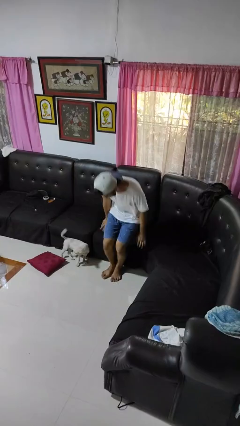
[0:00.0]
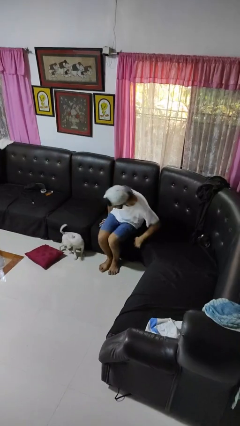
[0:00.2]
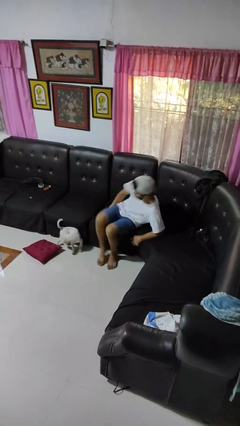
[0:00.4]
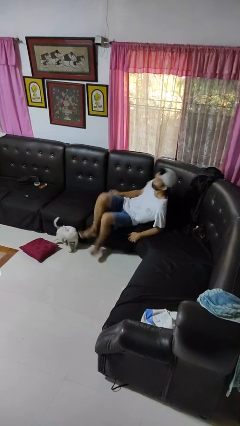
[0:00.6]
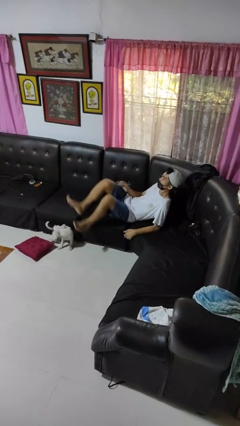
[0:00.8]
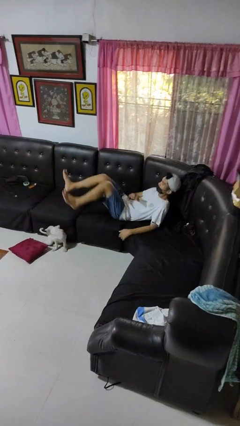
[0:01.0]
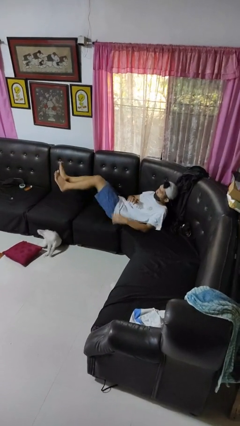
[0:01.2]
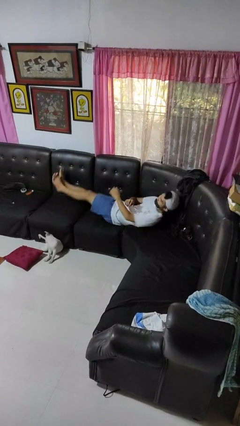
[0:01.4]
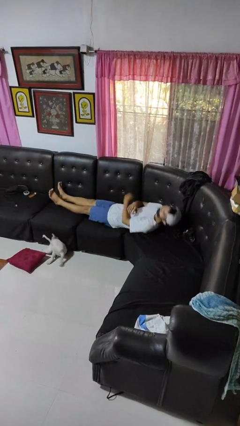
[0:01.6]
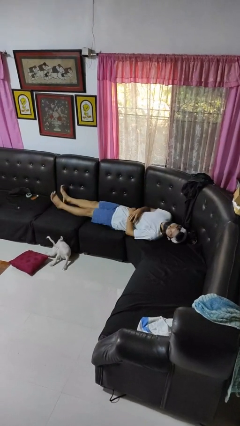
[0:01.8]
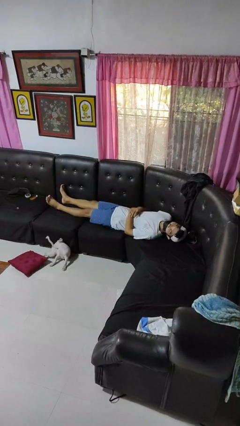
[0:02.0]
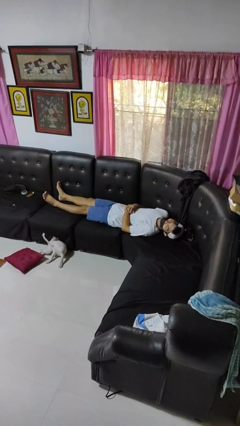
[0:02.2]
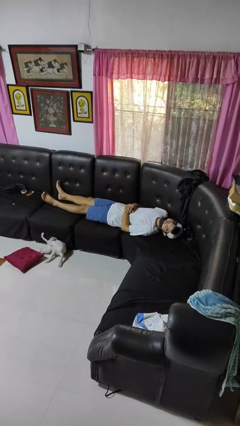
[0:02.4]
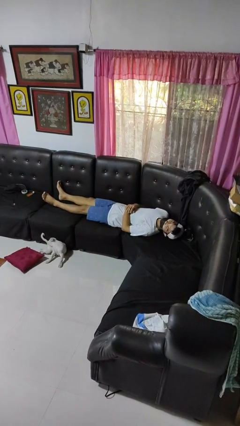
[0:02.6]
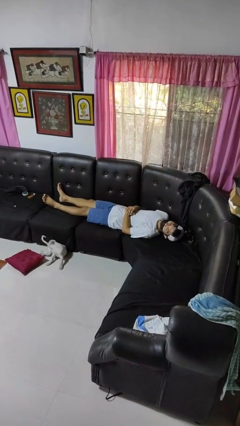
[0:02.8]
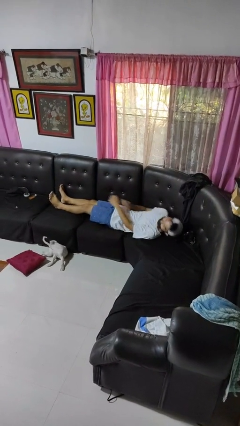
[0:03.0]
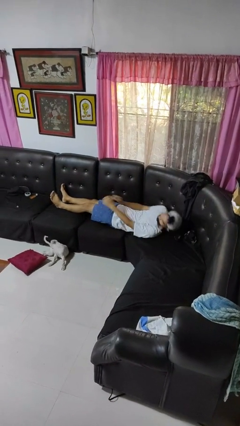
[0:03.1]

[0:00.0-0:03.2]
person lies down on couch

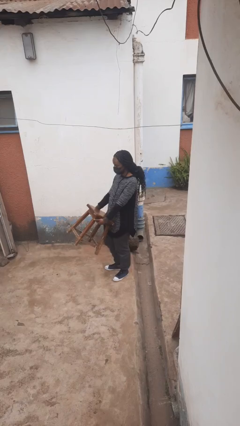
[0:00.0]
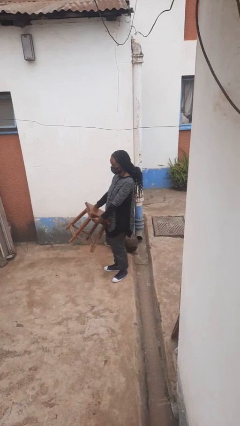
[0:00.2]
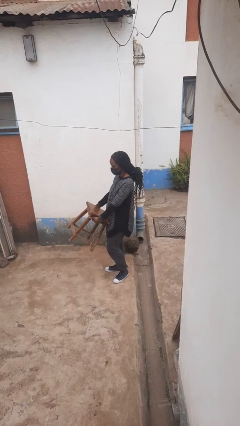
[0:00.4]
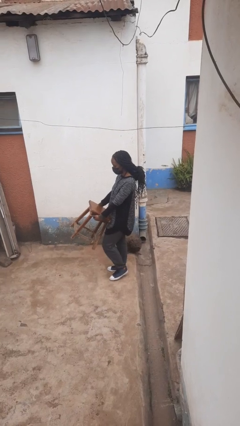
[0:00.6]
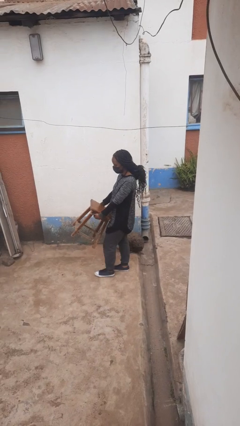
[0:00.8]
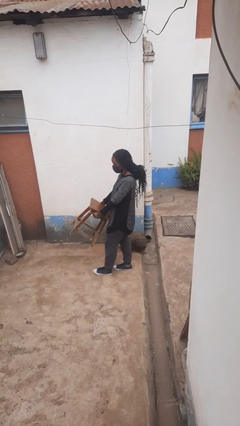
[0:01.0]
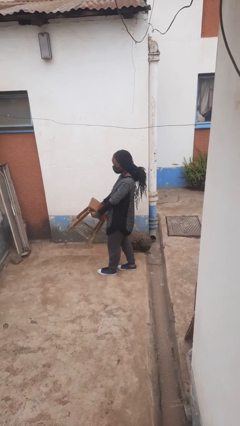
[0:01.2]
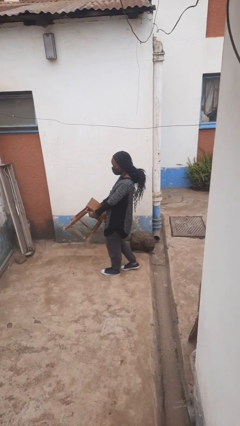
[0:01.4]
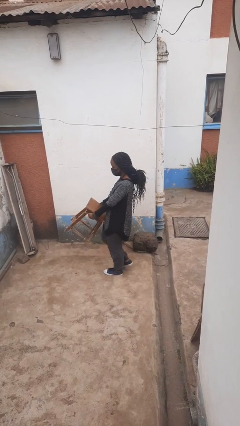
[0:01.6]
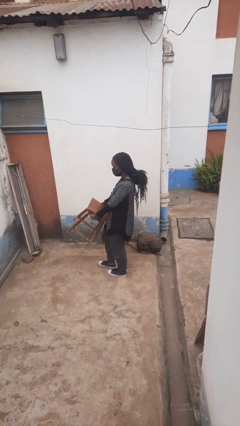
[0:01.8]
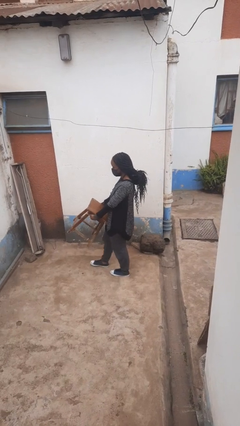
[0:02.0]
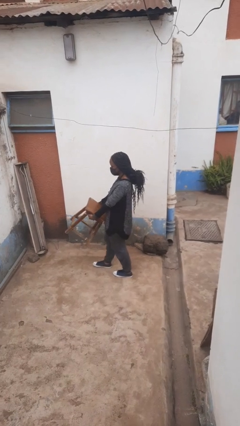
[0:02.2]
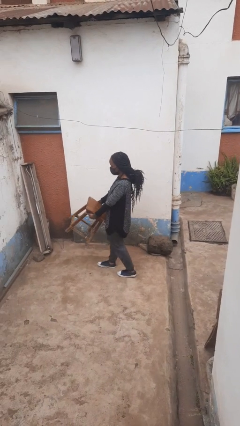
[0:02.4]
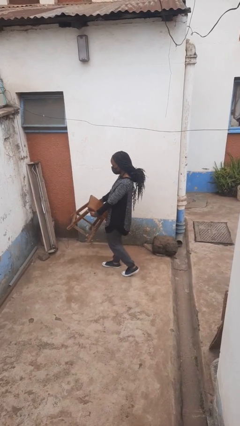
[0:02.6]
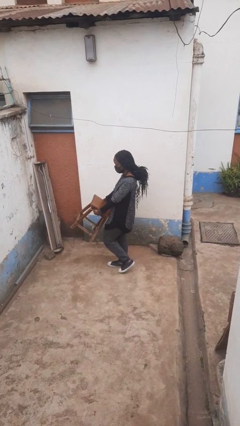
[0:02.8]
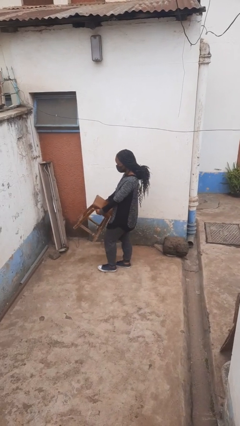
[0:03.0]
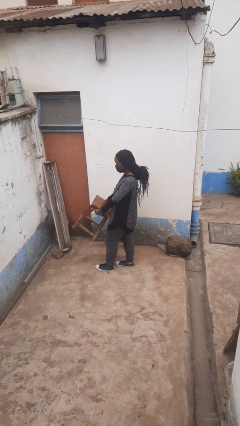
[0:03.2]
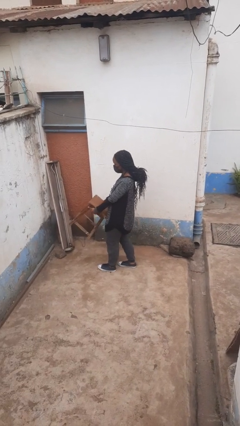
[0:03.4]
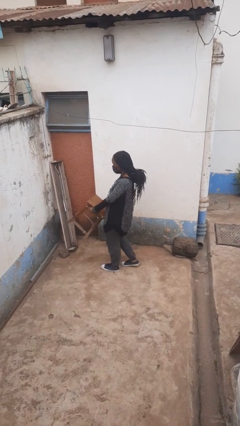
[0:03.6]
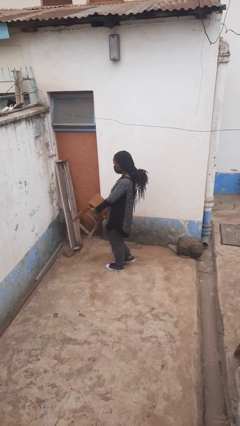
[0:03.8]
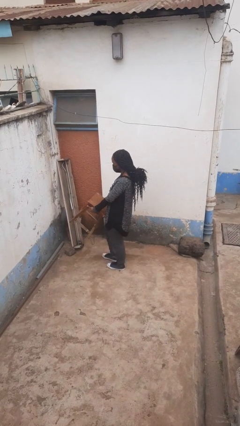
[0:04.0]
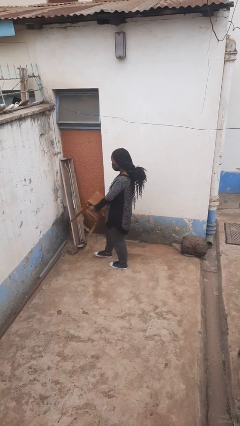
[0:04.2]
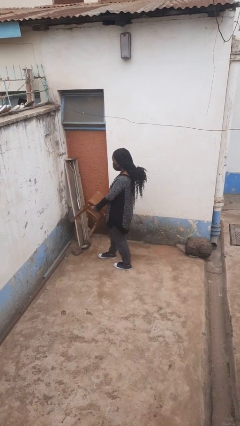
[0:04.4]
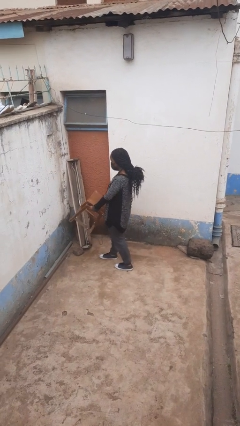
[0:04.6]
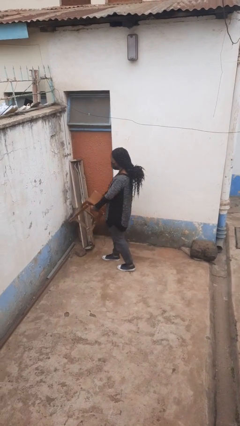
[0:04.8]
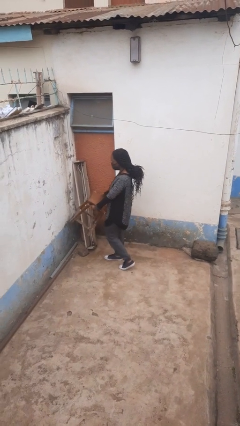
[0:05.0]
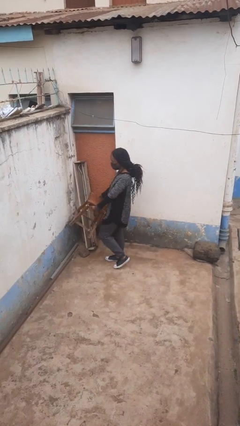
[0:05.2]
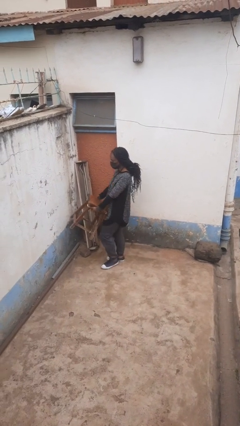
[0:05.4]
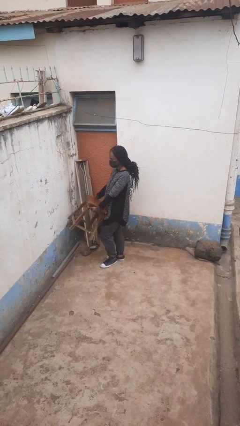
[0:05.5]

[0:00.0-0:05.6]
person carries furniture

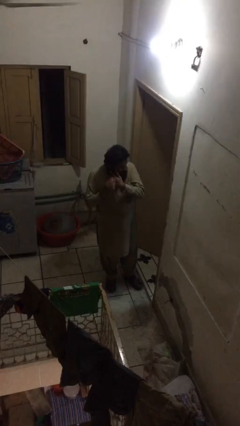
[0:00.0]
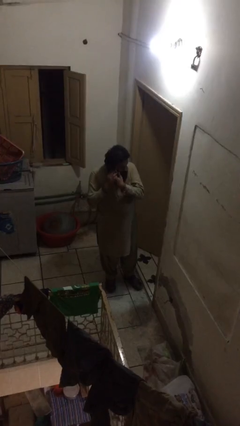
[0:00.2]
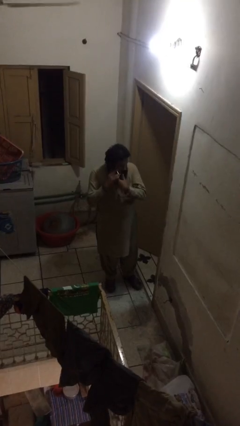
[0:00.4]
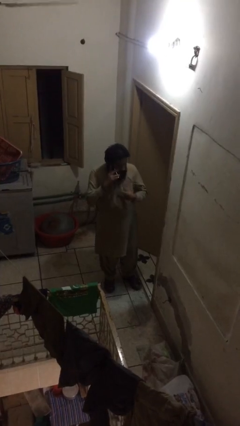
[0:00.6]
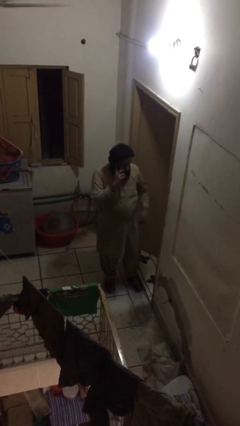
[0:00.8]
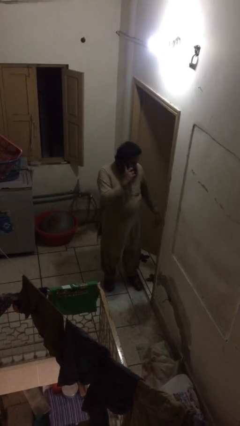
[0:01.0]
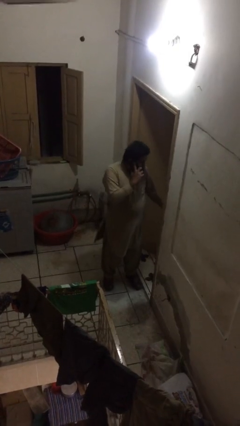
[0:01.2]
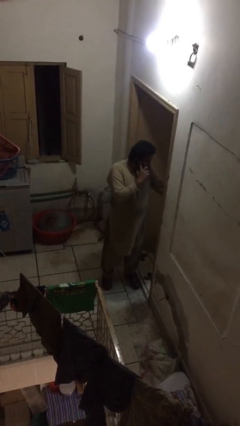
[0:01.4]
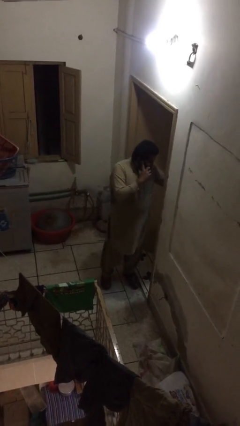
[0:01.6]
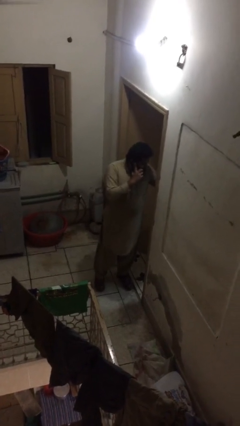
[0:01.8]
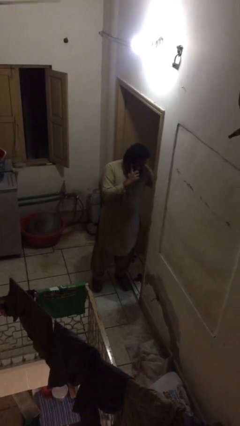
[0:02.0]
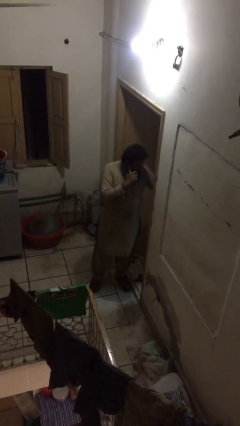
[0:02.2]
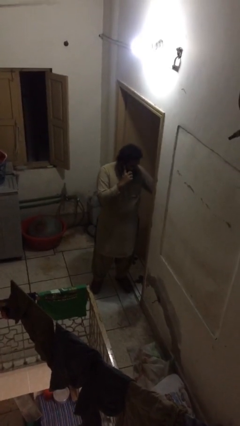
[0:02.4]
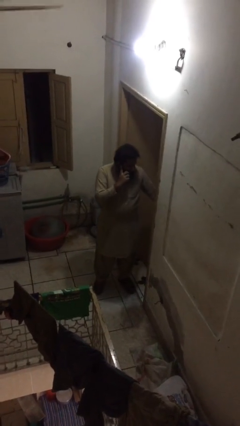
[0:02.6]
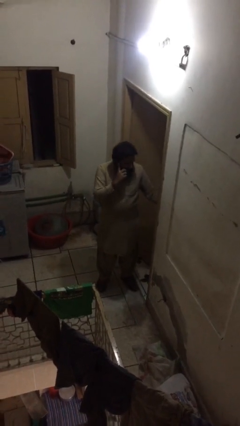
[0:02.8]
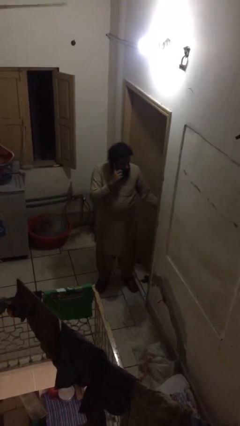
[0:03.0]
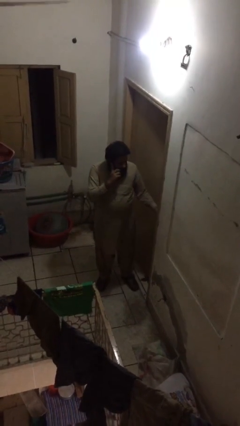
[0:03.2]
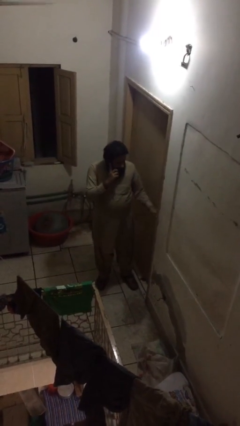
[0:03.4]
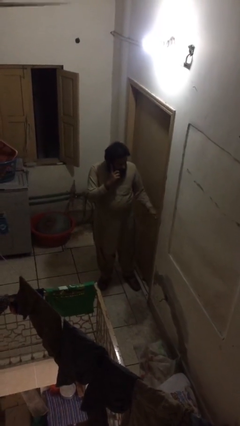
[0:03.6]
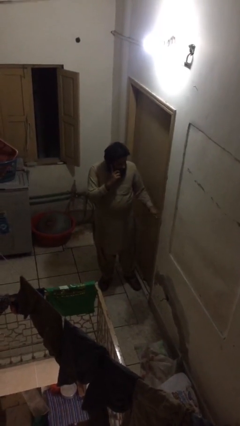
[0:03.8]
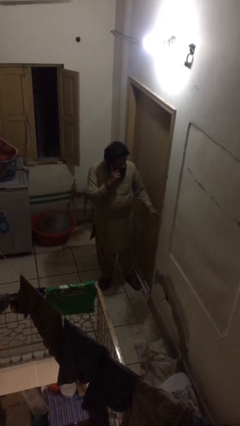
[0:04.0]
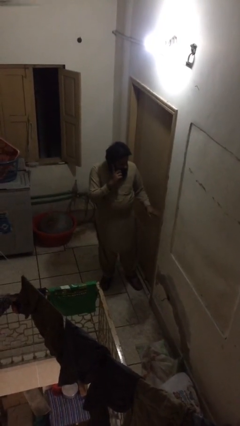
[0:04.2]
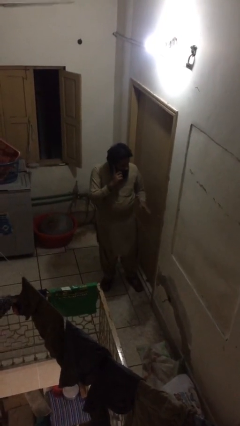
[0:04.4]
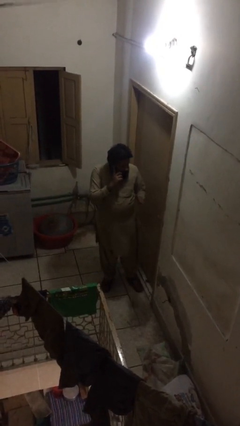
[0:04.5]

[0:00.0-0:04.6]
person closes facility door

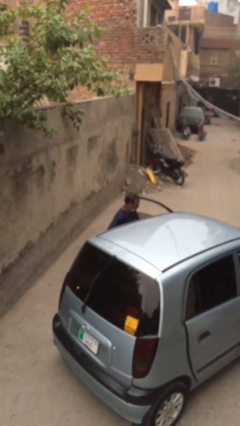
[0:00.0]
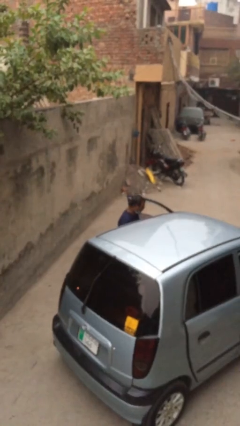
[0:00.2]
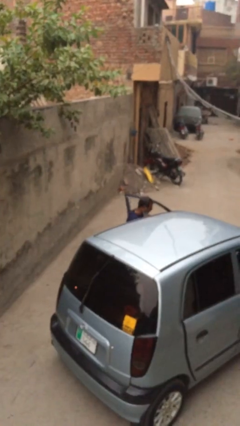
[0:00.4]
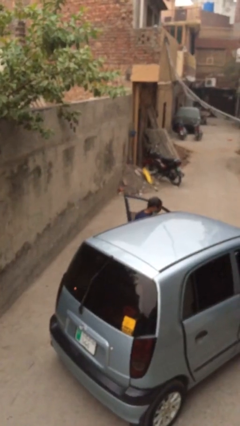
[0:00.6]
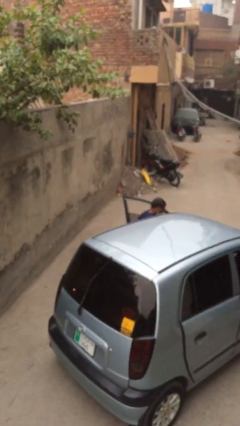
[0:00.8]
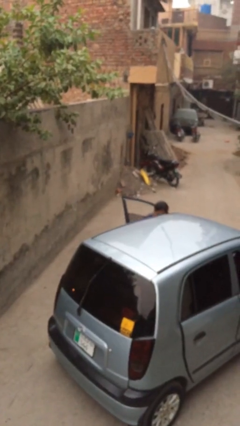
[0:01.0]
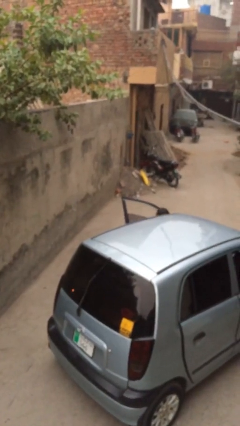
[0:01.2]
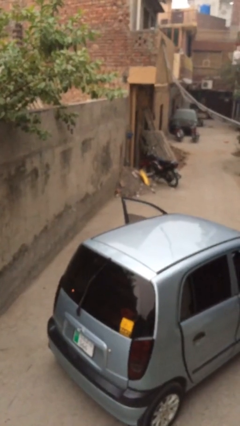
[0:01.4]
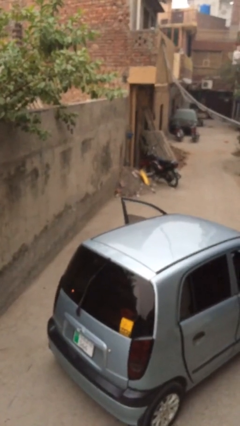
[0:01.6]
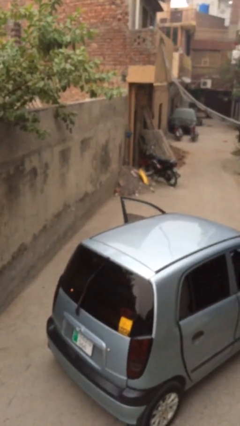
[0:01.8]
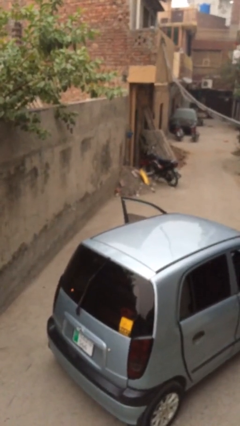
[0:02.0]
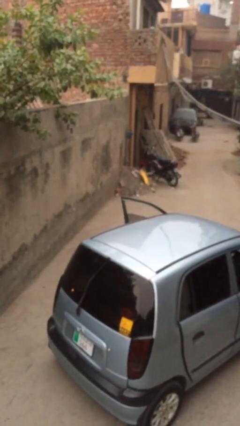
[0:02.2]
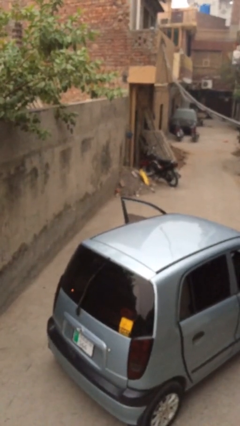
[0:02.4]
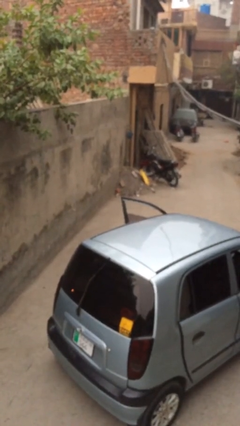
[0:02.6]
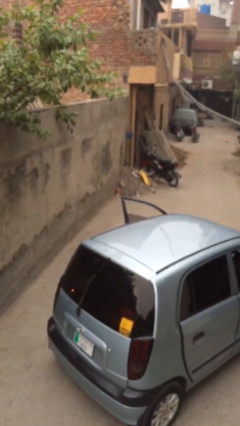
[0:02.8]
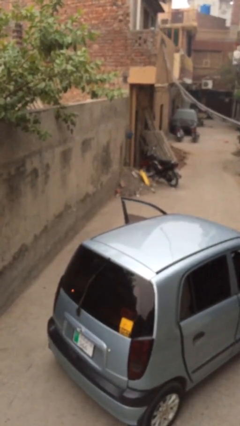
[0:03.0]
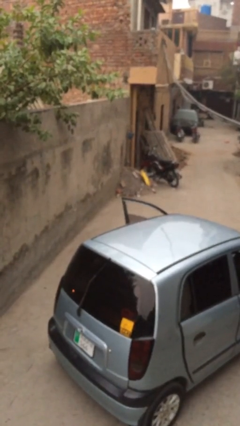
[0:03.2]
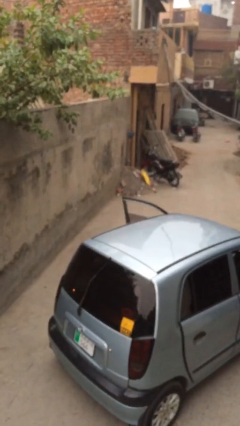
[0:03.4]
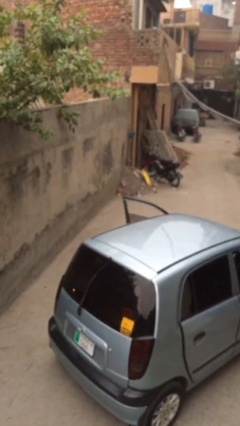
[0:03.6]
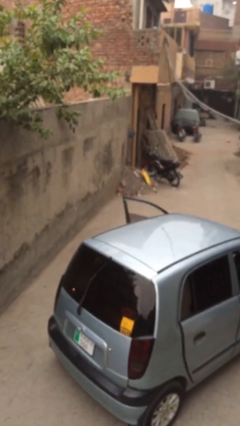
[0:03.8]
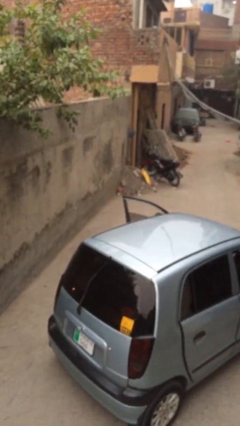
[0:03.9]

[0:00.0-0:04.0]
person enters car

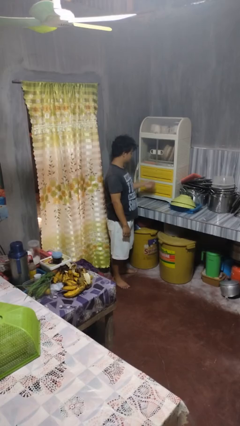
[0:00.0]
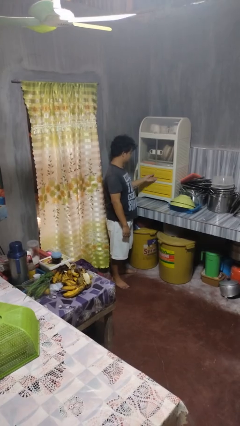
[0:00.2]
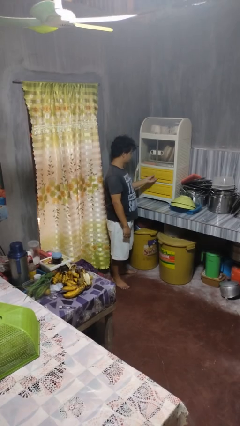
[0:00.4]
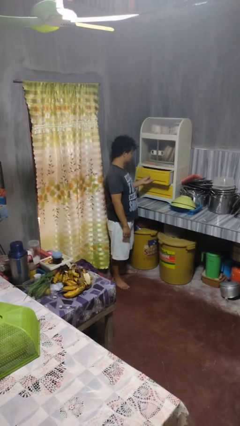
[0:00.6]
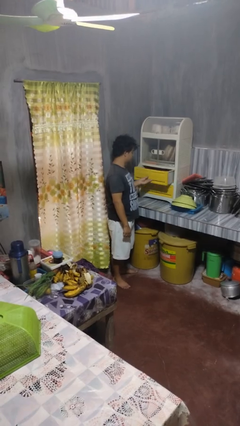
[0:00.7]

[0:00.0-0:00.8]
person opens kitchen drawer
